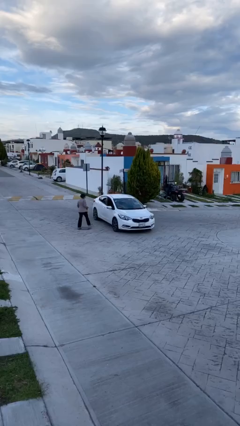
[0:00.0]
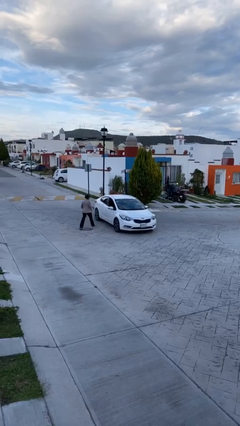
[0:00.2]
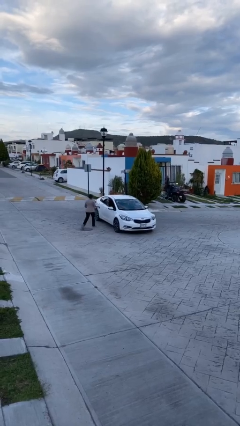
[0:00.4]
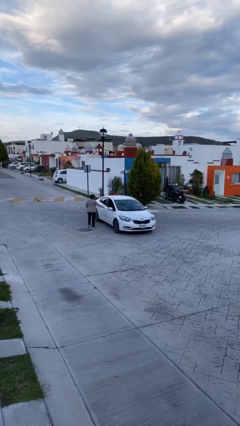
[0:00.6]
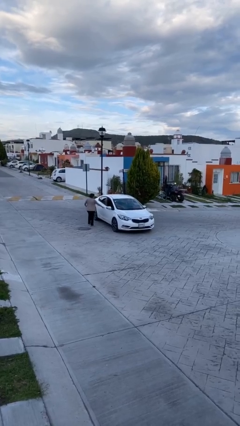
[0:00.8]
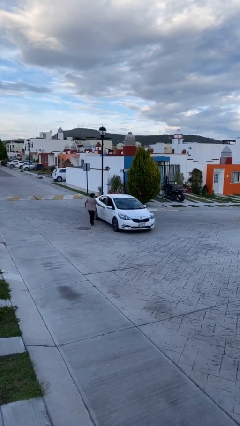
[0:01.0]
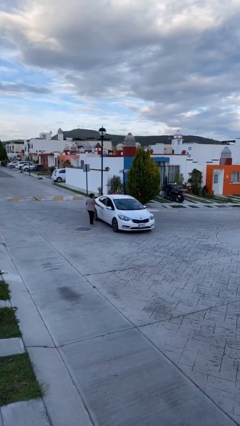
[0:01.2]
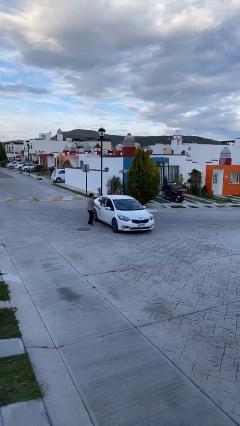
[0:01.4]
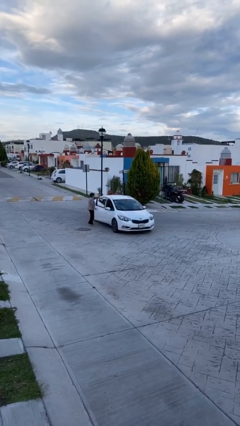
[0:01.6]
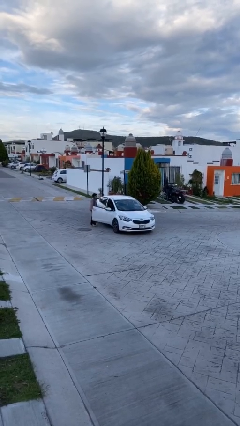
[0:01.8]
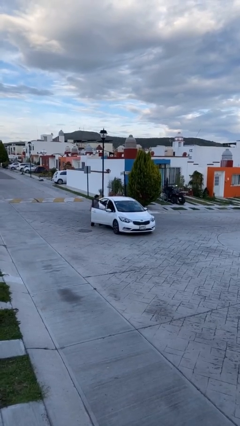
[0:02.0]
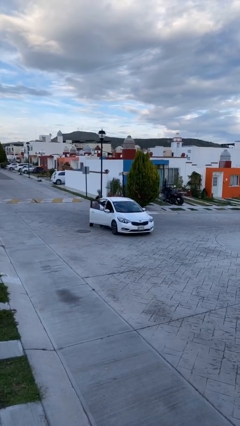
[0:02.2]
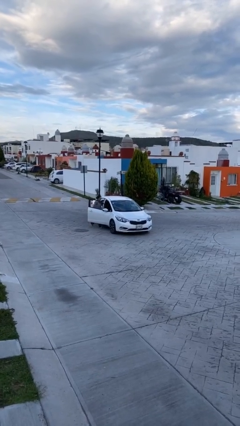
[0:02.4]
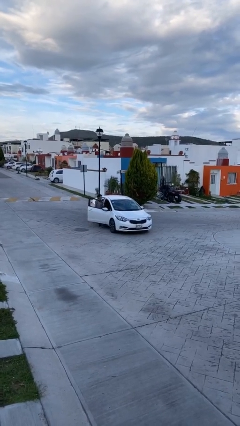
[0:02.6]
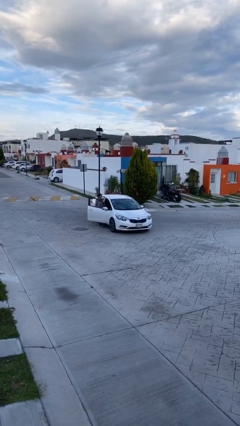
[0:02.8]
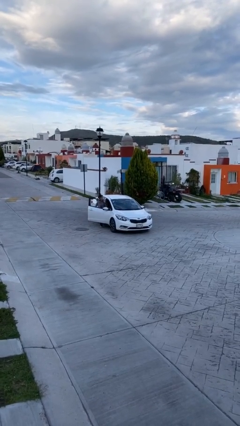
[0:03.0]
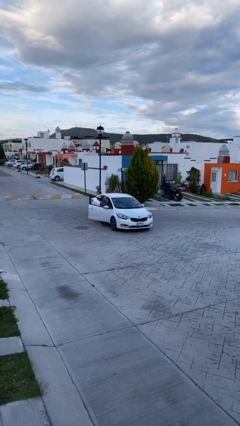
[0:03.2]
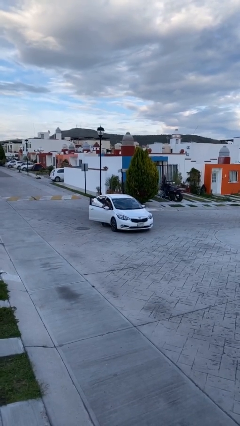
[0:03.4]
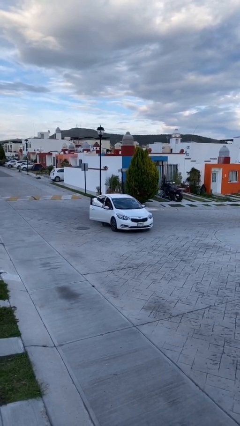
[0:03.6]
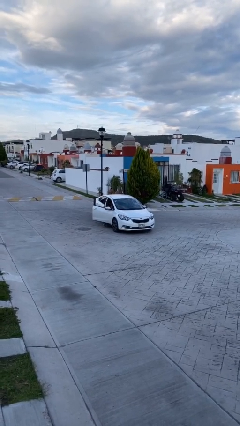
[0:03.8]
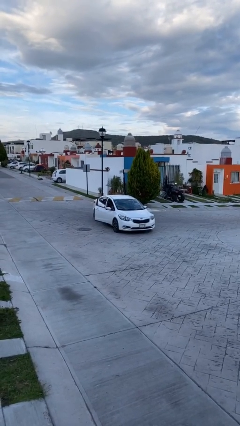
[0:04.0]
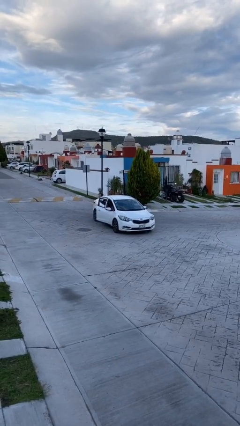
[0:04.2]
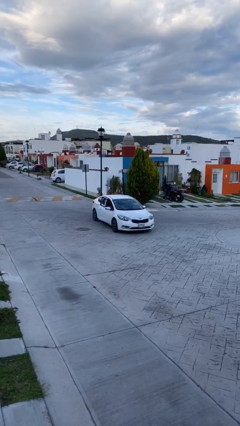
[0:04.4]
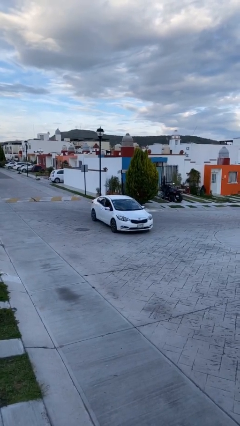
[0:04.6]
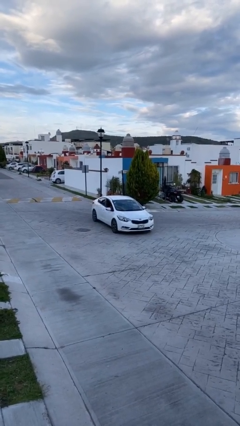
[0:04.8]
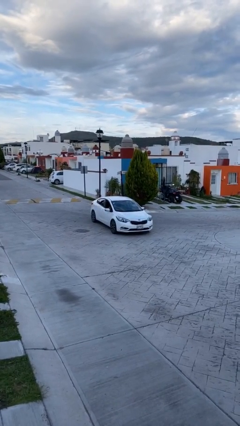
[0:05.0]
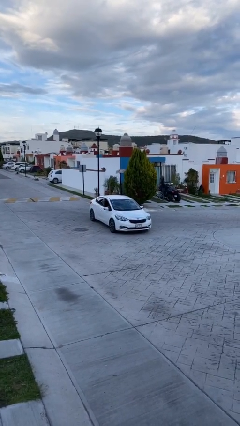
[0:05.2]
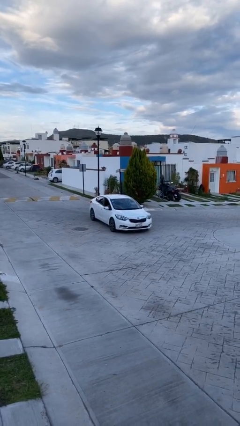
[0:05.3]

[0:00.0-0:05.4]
car picks up person

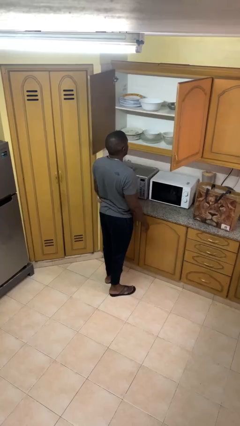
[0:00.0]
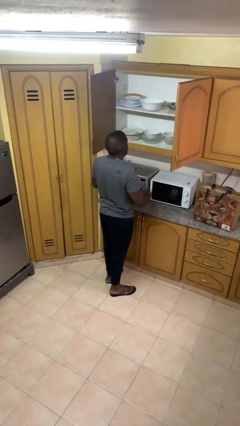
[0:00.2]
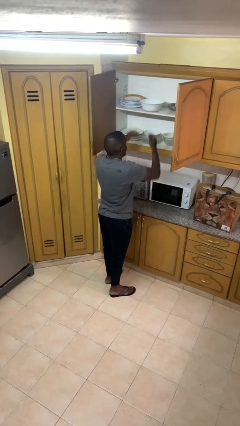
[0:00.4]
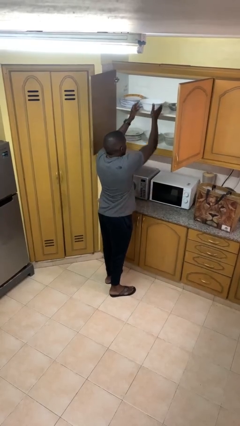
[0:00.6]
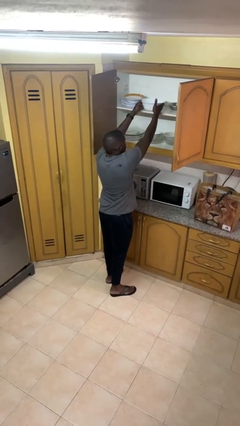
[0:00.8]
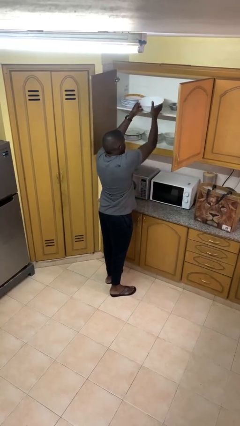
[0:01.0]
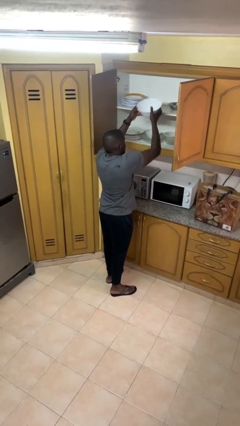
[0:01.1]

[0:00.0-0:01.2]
person takes object from cabinet

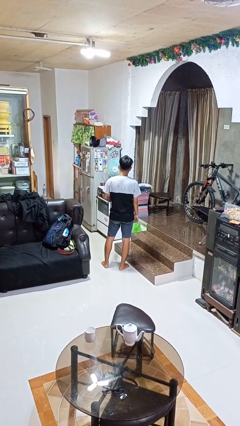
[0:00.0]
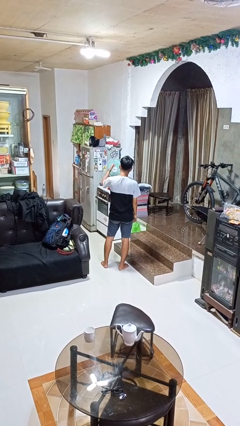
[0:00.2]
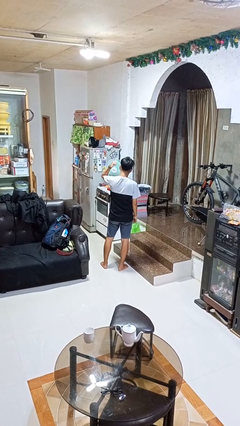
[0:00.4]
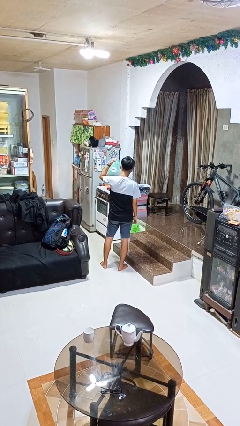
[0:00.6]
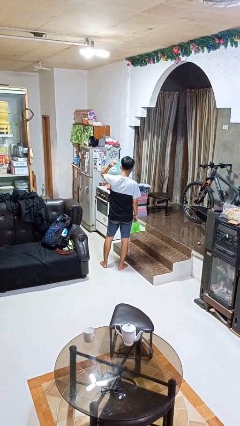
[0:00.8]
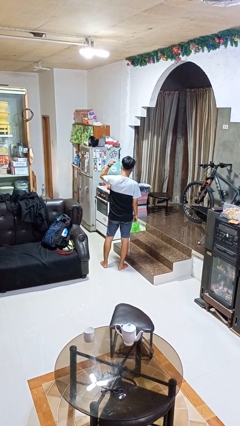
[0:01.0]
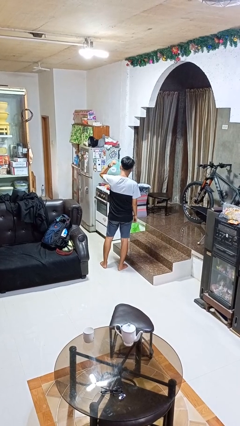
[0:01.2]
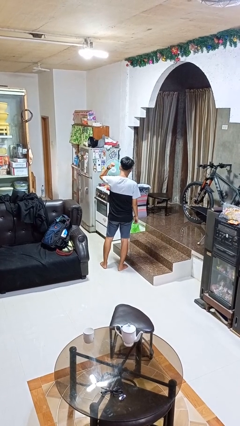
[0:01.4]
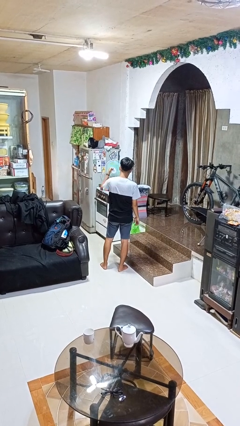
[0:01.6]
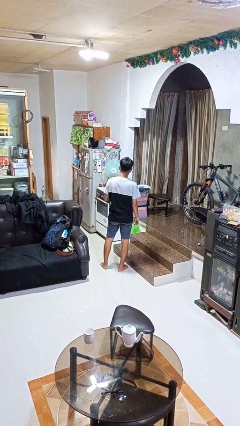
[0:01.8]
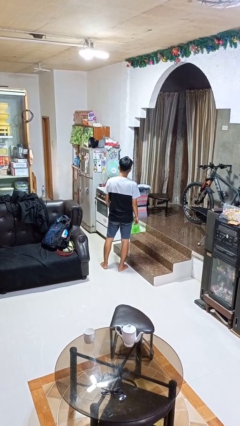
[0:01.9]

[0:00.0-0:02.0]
person gestures behind me

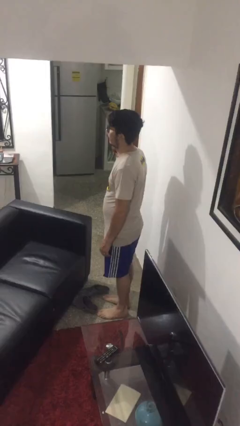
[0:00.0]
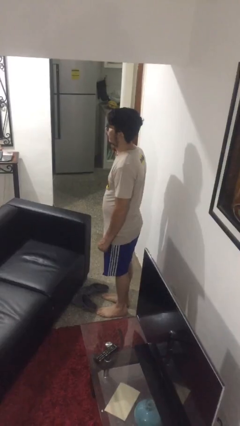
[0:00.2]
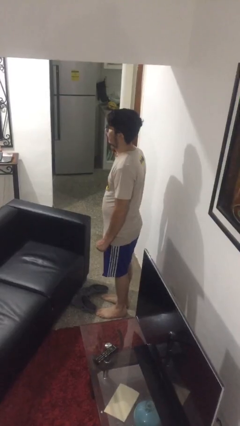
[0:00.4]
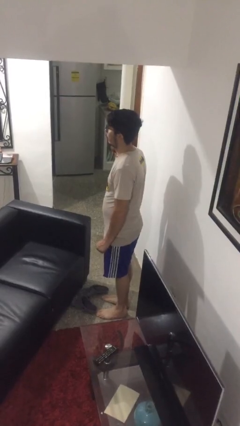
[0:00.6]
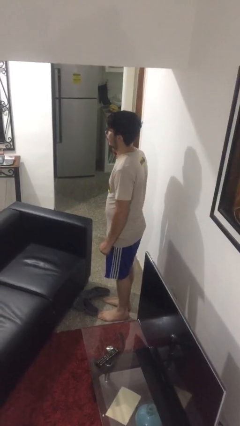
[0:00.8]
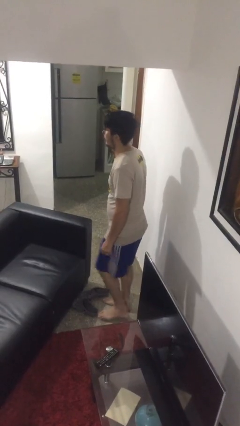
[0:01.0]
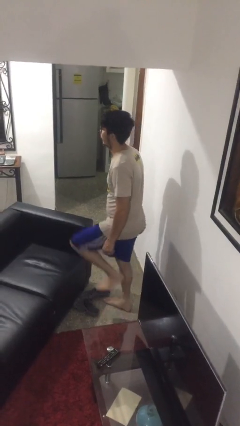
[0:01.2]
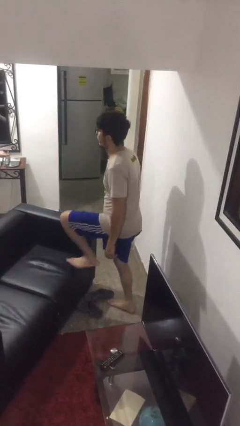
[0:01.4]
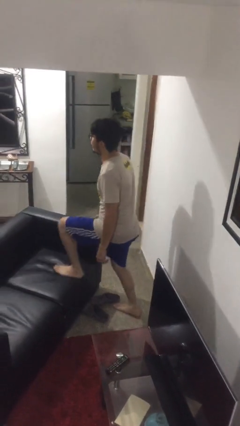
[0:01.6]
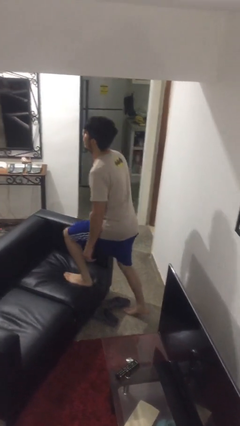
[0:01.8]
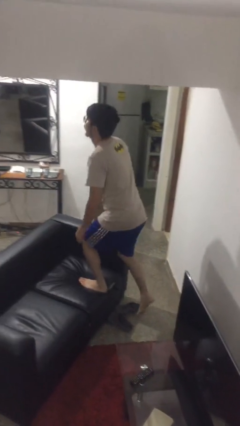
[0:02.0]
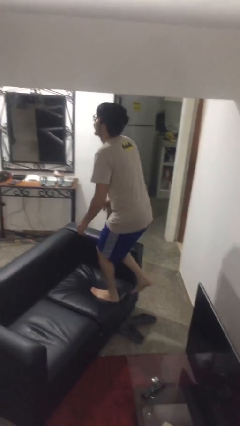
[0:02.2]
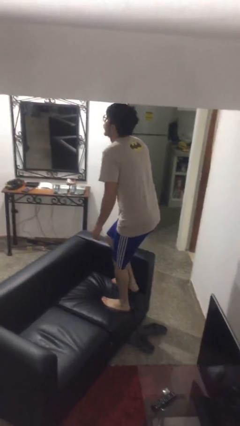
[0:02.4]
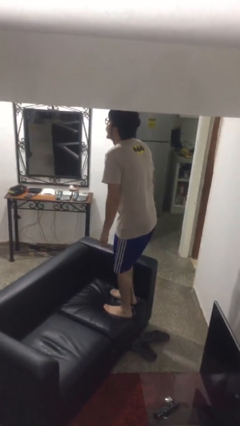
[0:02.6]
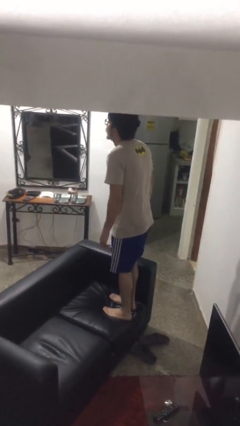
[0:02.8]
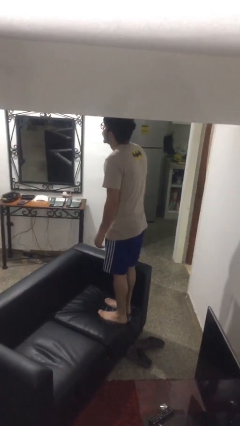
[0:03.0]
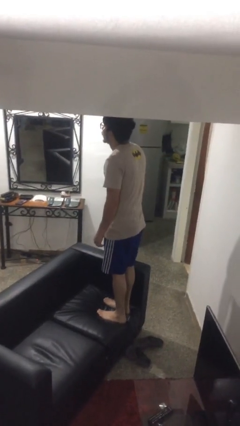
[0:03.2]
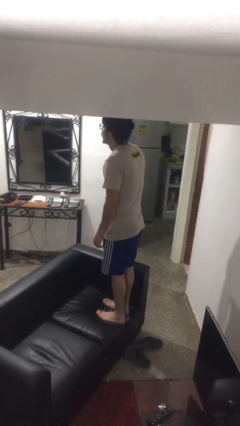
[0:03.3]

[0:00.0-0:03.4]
person climbs on couch

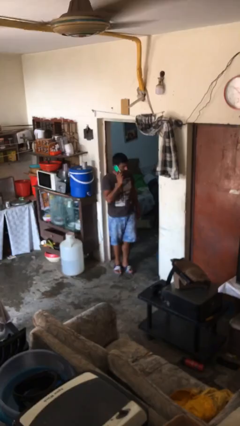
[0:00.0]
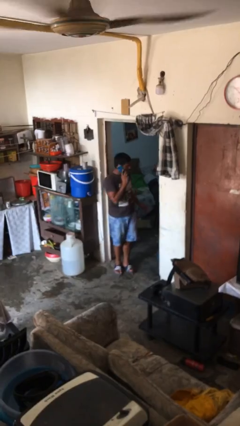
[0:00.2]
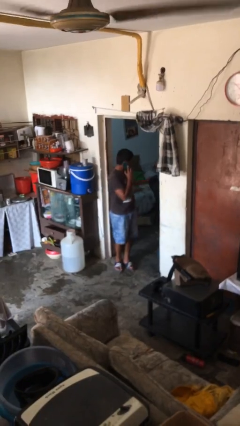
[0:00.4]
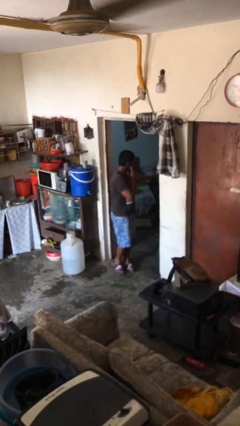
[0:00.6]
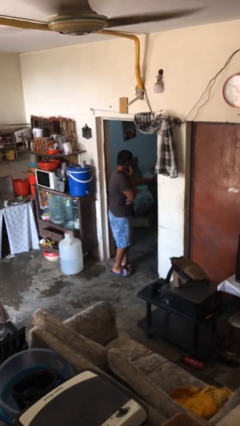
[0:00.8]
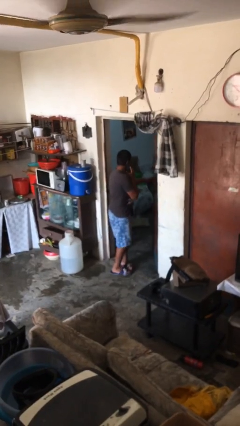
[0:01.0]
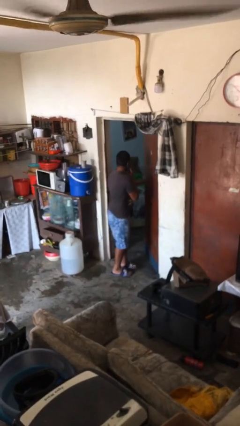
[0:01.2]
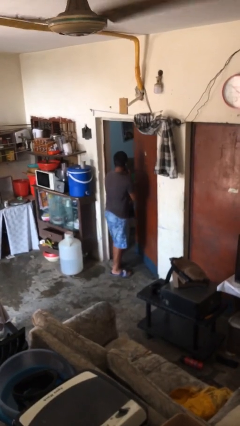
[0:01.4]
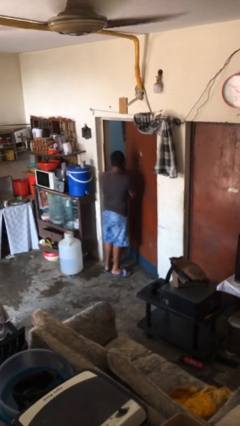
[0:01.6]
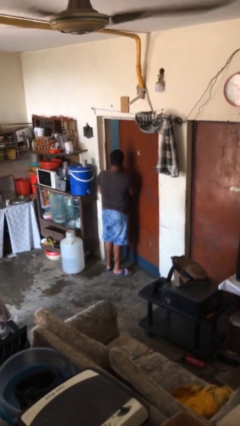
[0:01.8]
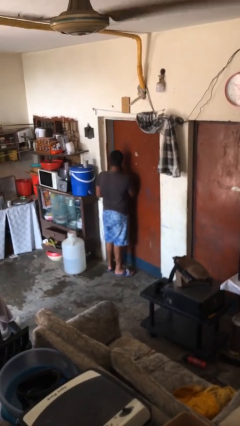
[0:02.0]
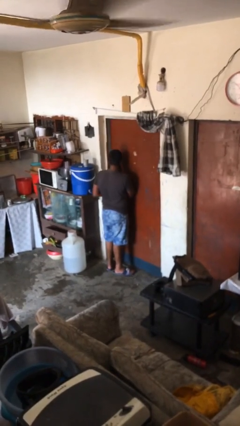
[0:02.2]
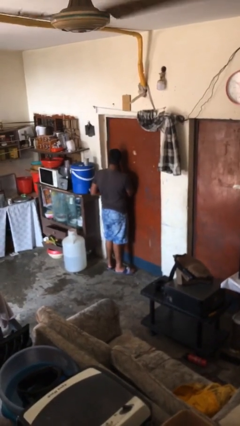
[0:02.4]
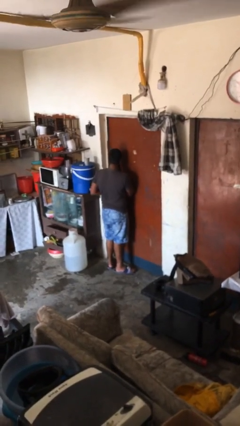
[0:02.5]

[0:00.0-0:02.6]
person closes facility door

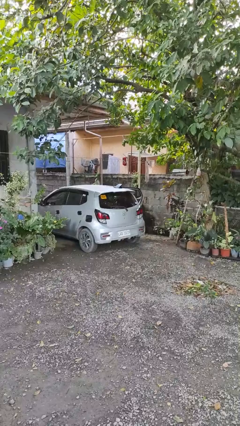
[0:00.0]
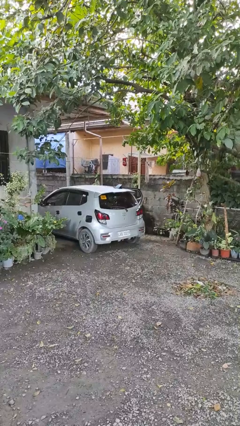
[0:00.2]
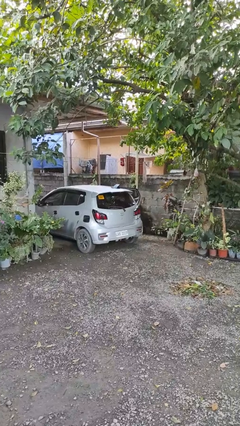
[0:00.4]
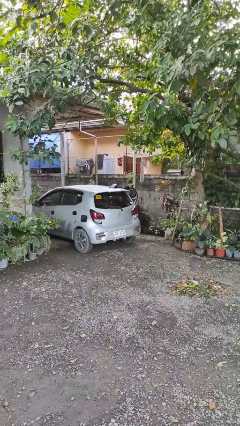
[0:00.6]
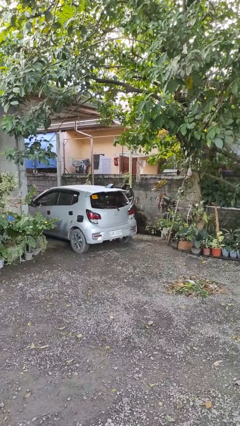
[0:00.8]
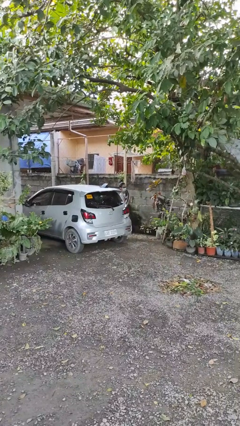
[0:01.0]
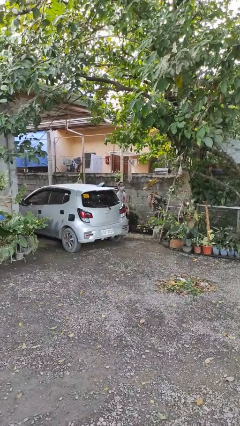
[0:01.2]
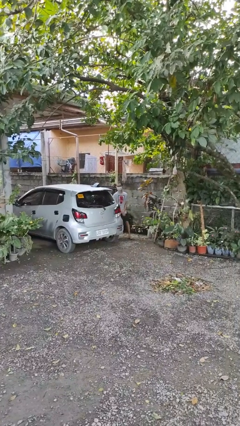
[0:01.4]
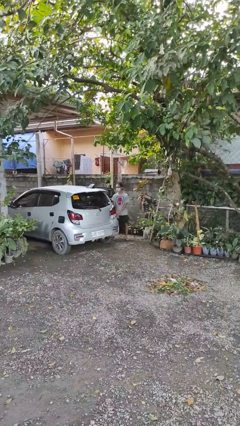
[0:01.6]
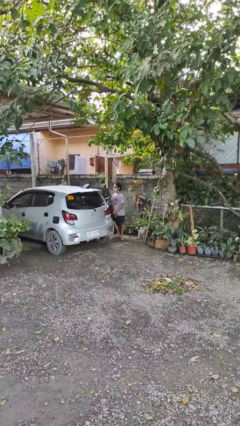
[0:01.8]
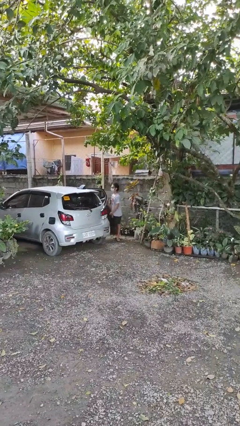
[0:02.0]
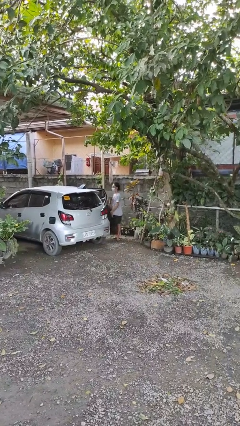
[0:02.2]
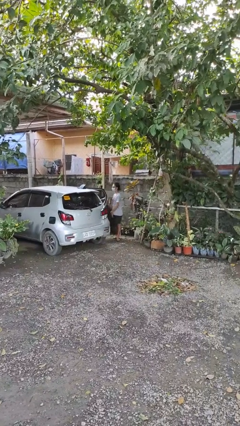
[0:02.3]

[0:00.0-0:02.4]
person exits car

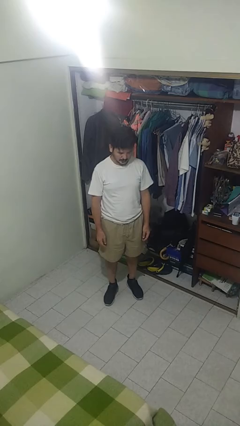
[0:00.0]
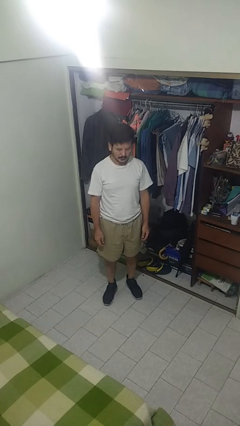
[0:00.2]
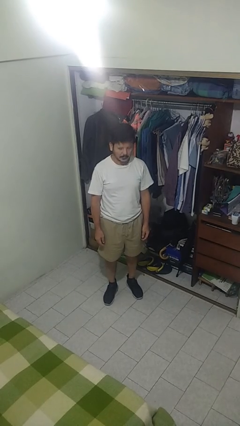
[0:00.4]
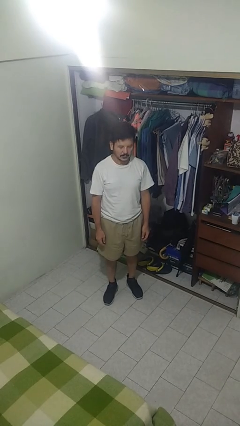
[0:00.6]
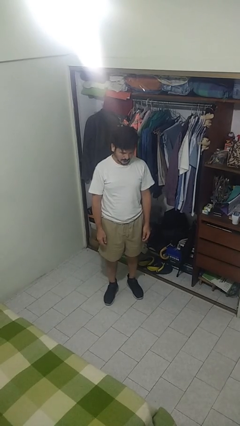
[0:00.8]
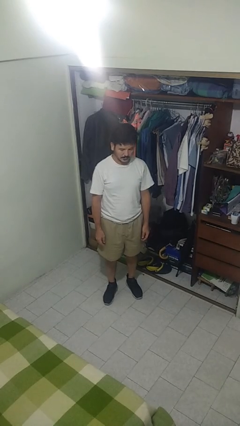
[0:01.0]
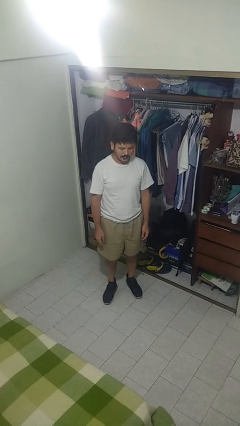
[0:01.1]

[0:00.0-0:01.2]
person nods head
